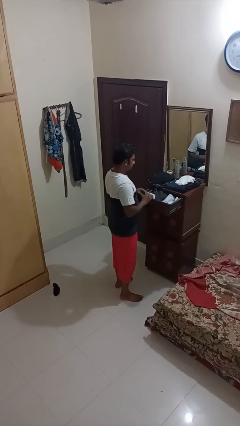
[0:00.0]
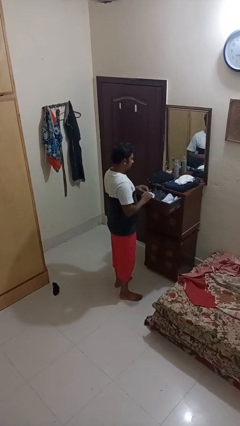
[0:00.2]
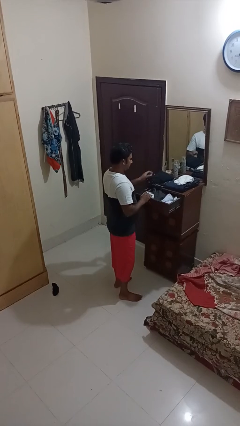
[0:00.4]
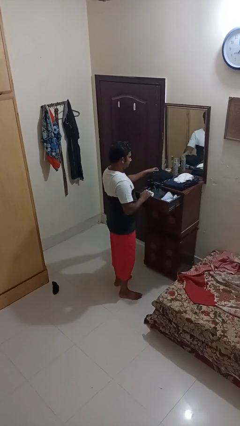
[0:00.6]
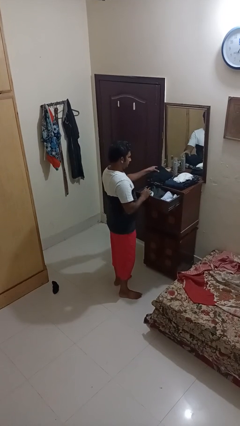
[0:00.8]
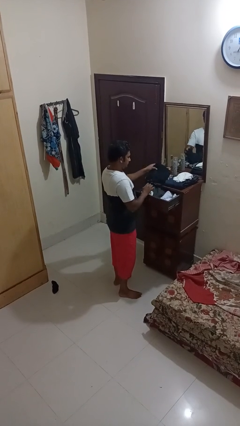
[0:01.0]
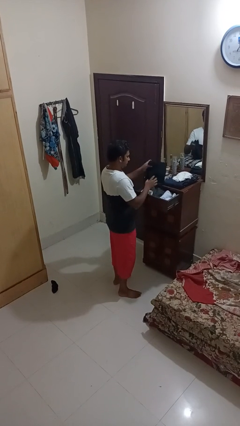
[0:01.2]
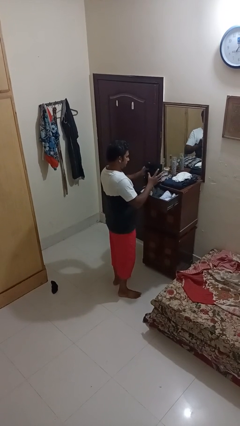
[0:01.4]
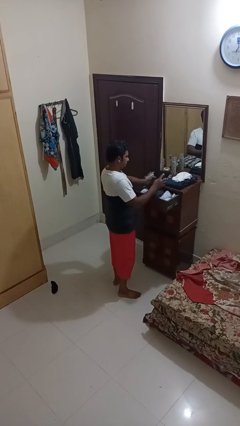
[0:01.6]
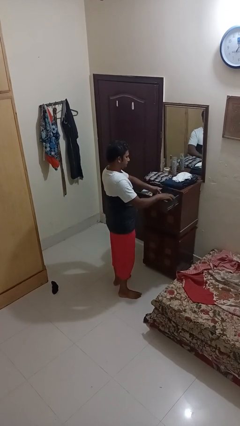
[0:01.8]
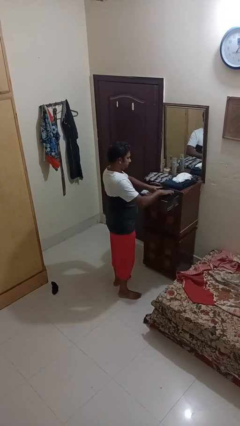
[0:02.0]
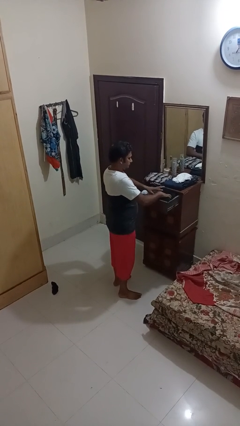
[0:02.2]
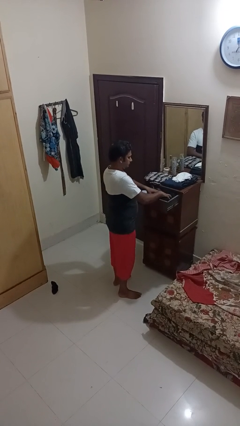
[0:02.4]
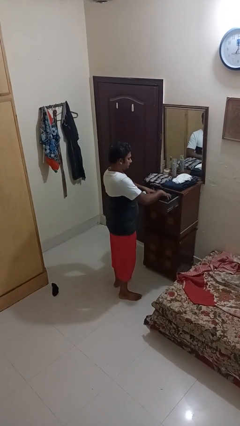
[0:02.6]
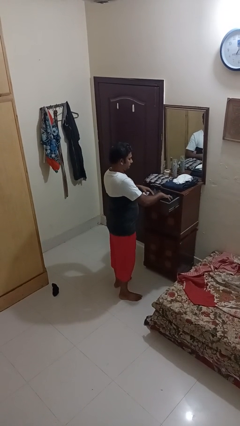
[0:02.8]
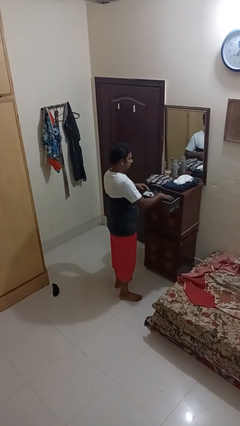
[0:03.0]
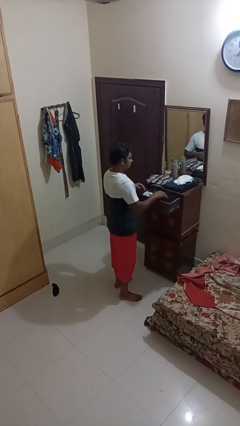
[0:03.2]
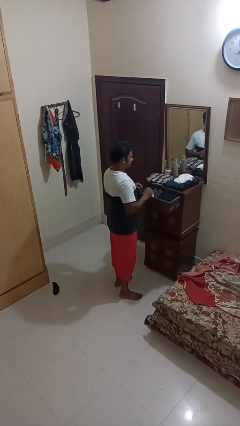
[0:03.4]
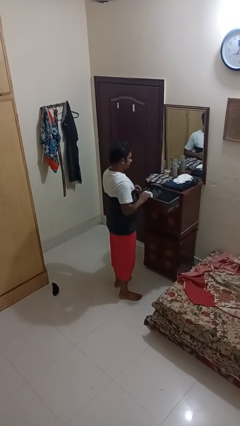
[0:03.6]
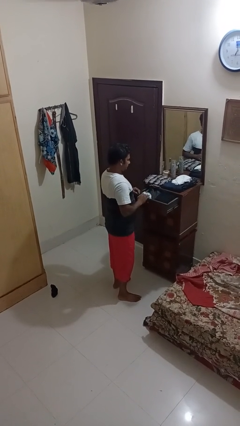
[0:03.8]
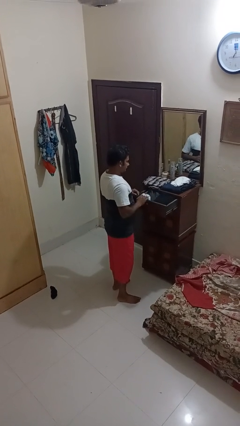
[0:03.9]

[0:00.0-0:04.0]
person puts clothes into dresser

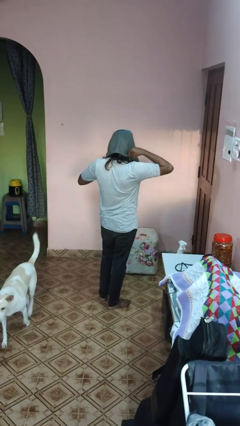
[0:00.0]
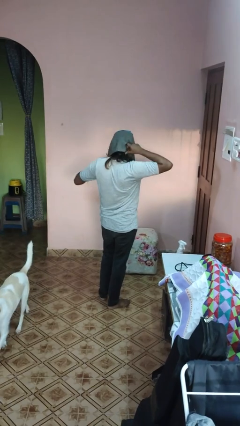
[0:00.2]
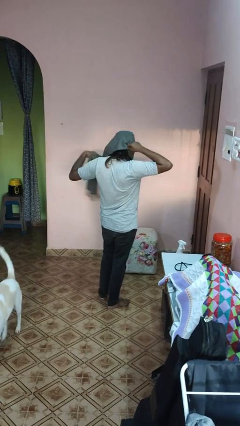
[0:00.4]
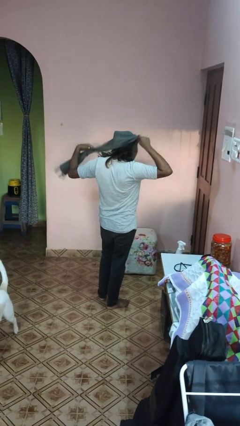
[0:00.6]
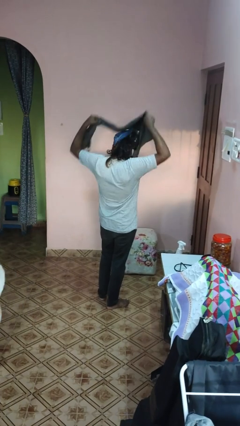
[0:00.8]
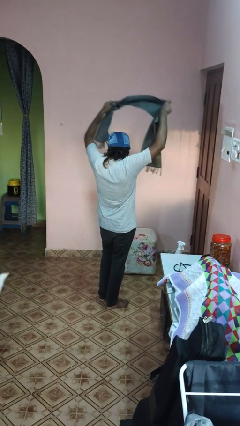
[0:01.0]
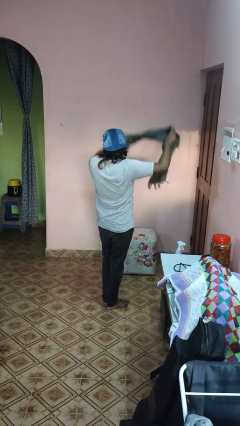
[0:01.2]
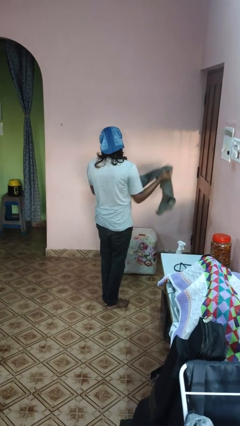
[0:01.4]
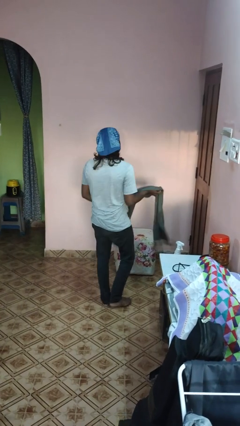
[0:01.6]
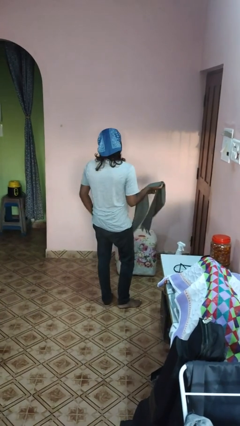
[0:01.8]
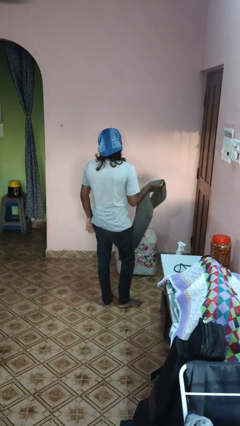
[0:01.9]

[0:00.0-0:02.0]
person takes off scarf

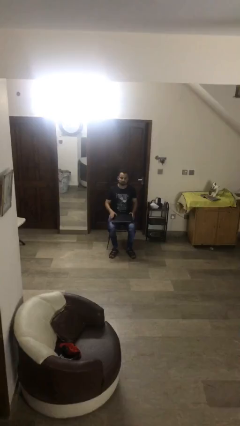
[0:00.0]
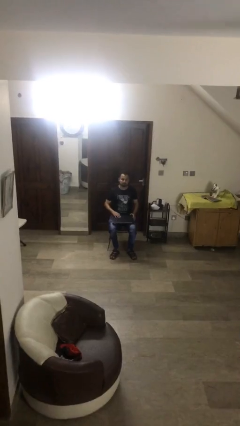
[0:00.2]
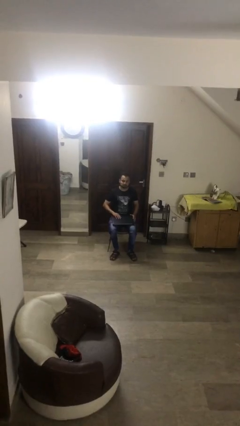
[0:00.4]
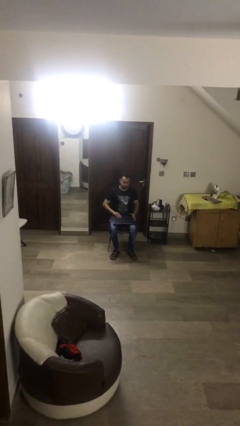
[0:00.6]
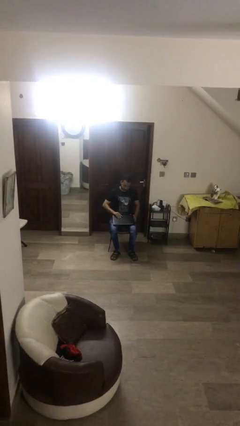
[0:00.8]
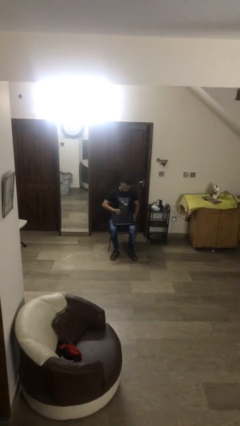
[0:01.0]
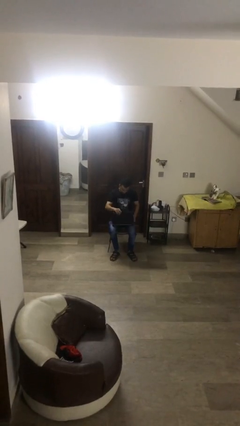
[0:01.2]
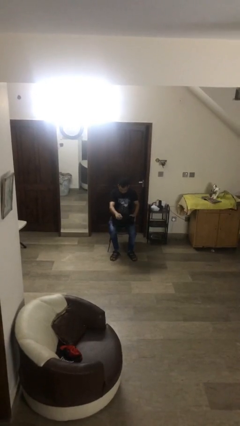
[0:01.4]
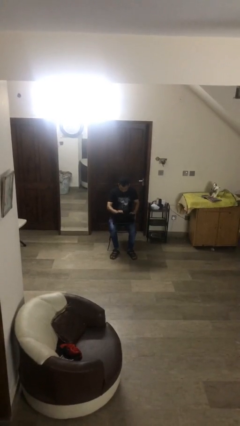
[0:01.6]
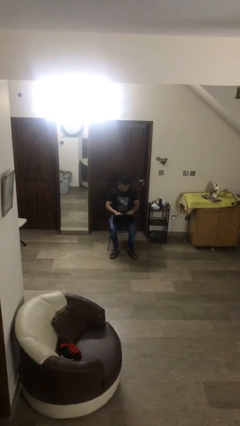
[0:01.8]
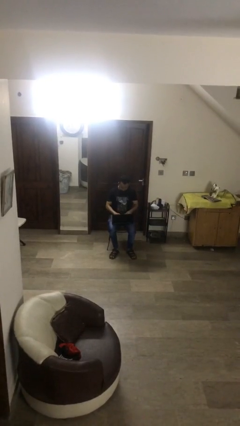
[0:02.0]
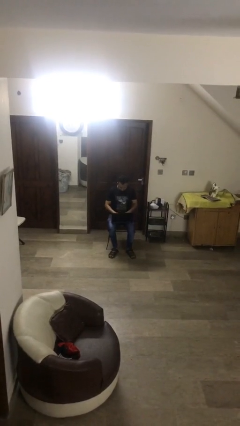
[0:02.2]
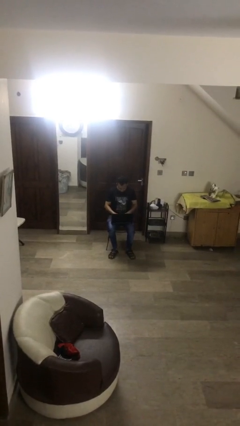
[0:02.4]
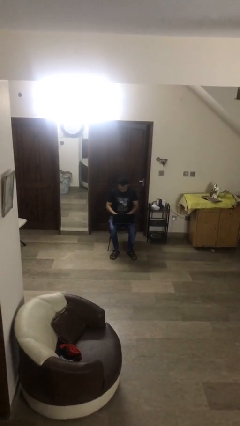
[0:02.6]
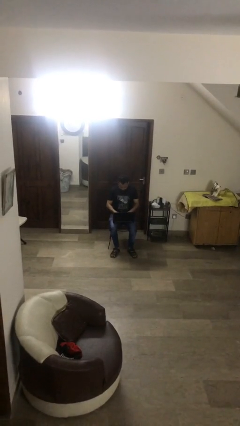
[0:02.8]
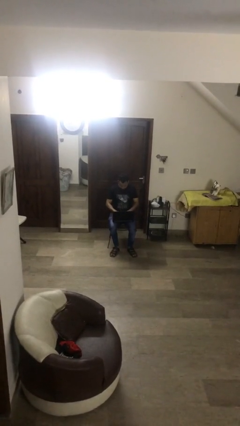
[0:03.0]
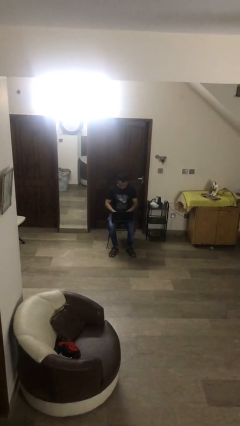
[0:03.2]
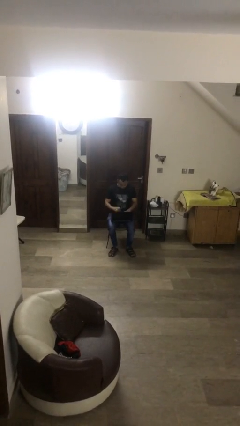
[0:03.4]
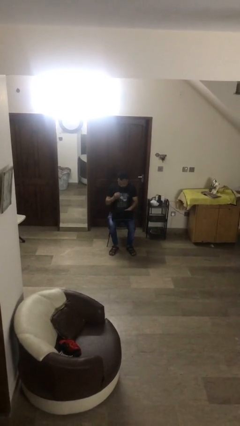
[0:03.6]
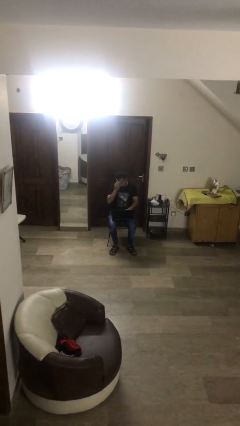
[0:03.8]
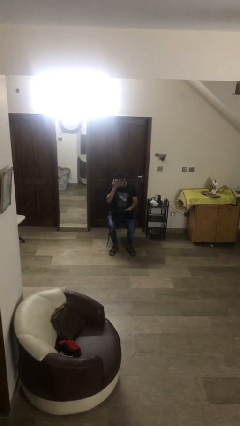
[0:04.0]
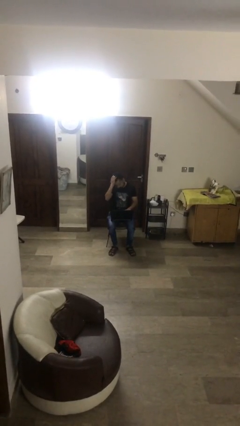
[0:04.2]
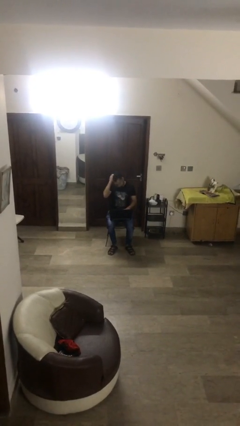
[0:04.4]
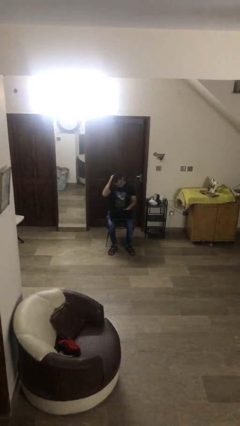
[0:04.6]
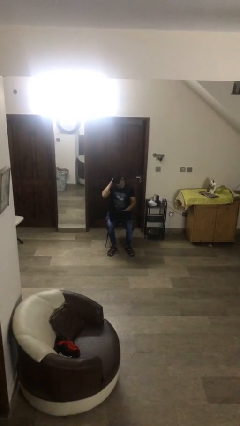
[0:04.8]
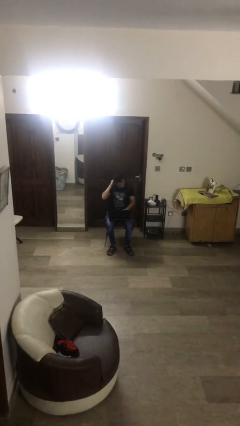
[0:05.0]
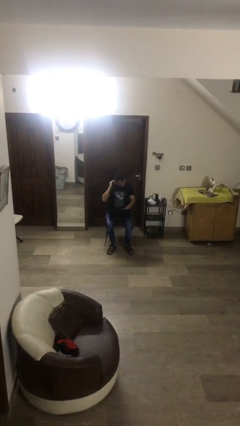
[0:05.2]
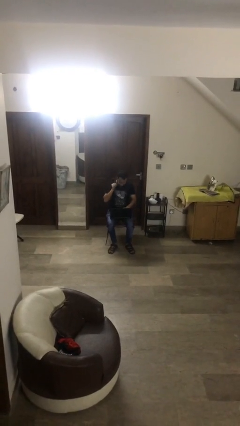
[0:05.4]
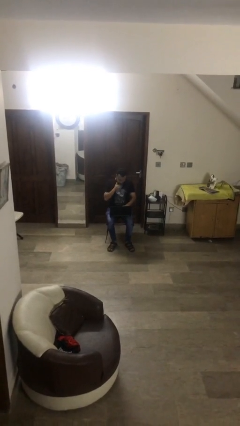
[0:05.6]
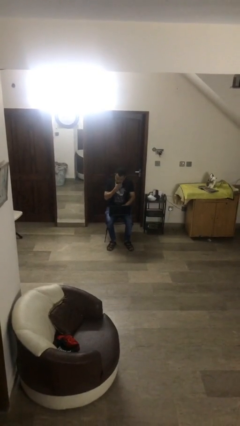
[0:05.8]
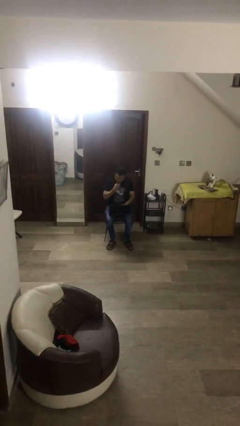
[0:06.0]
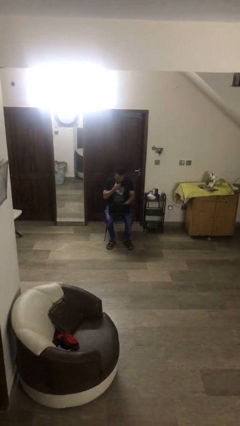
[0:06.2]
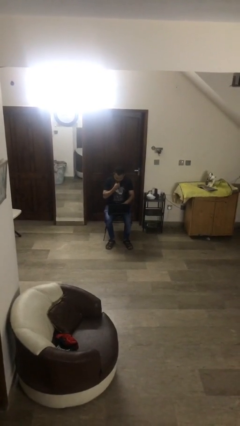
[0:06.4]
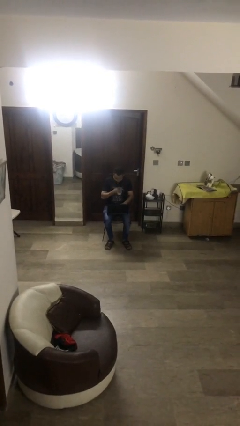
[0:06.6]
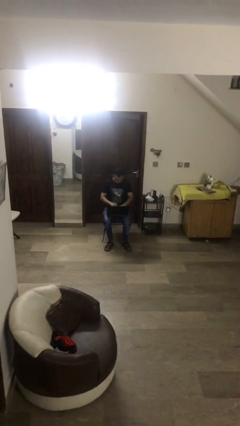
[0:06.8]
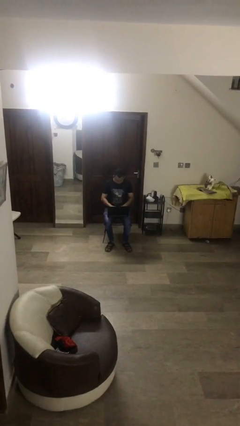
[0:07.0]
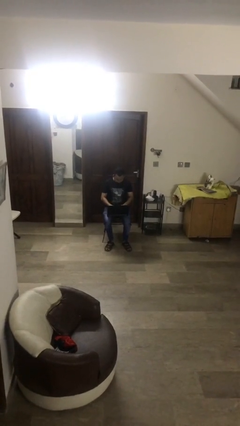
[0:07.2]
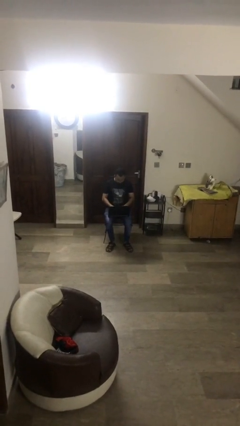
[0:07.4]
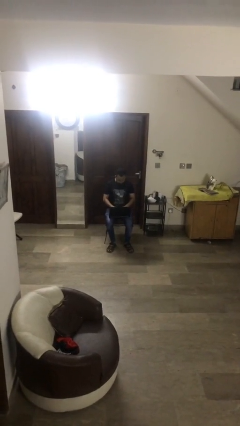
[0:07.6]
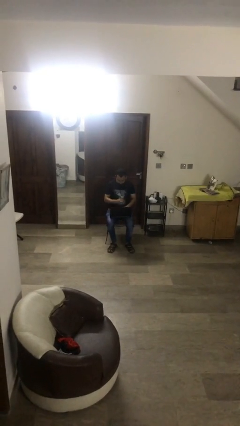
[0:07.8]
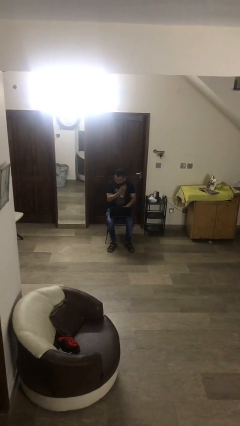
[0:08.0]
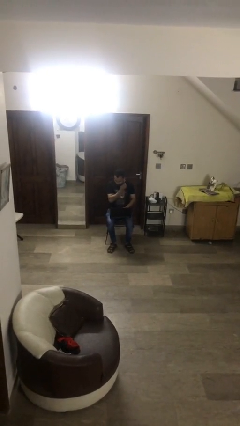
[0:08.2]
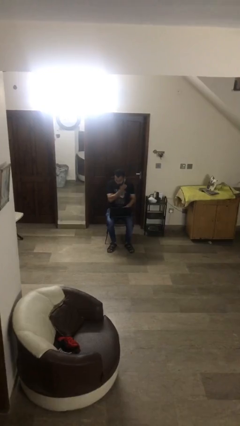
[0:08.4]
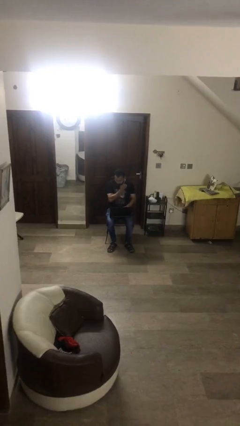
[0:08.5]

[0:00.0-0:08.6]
person interacts with laptop

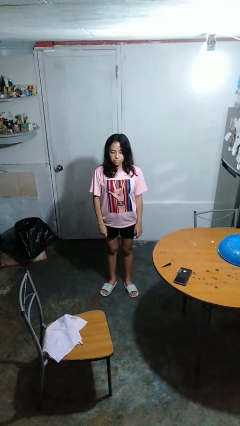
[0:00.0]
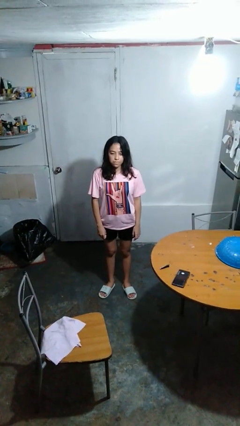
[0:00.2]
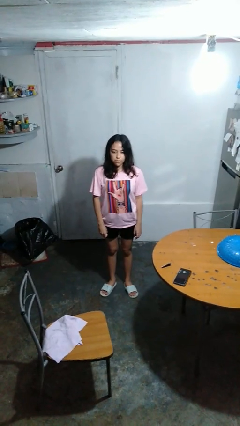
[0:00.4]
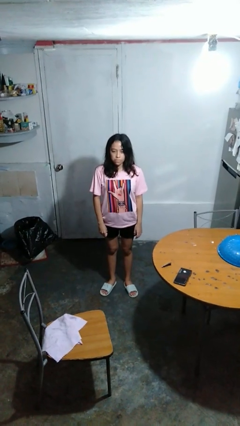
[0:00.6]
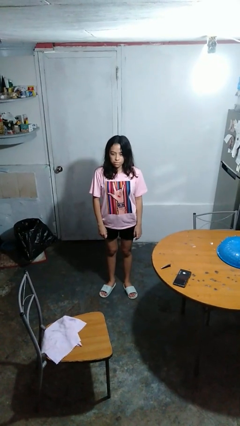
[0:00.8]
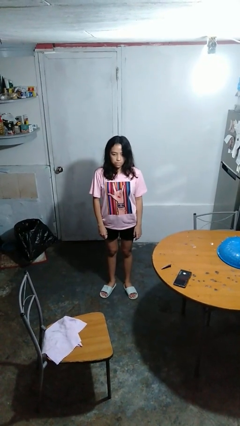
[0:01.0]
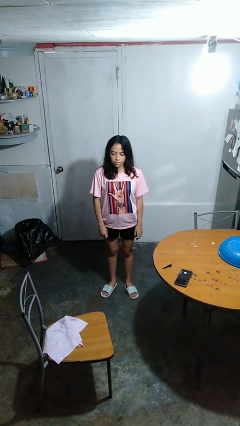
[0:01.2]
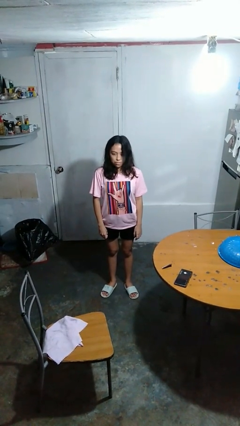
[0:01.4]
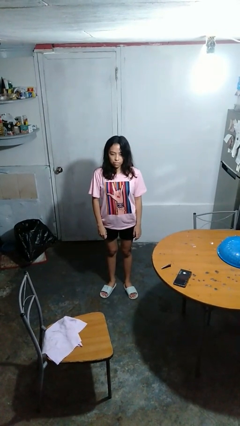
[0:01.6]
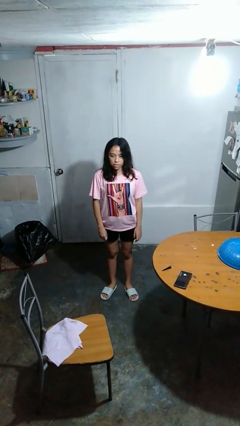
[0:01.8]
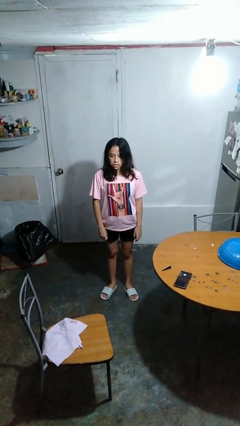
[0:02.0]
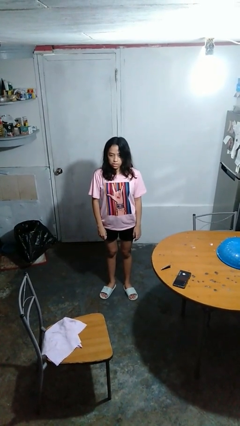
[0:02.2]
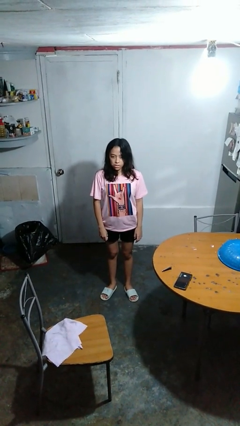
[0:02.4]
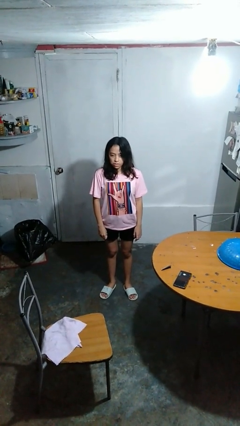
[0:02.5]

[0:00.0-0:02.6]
person shakes head
